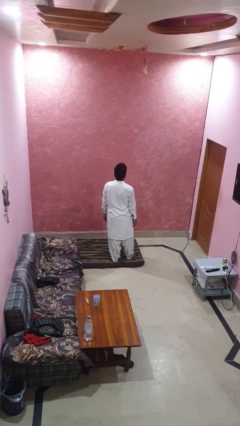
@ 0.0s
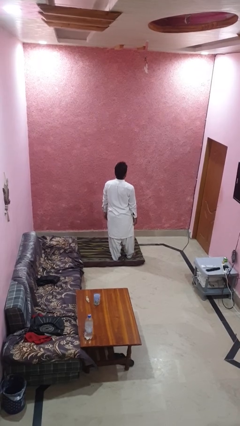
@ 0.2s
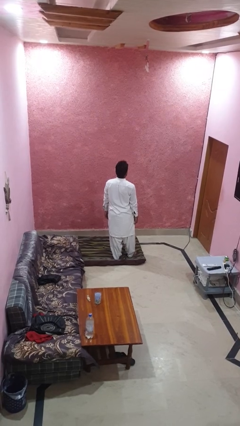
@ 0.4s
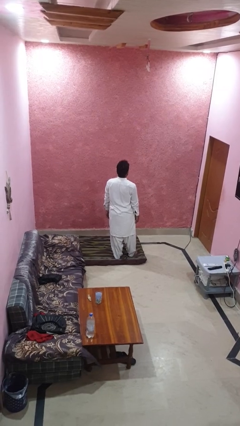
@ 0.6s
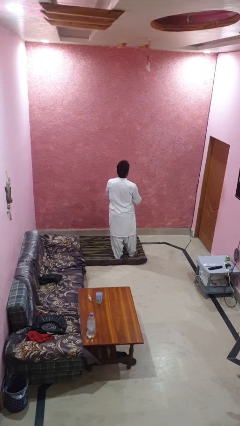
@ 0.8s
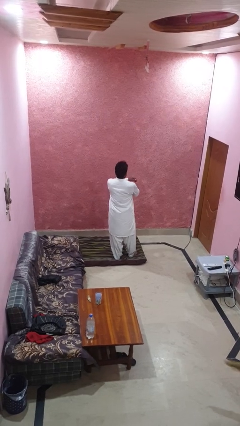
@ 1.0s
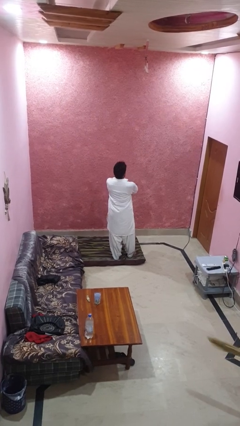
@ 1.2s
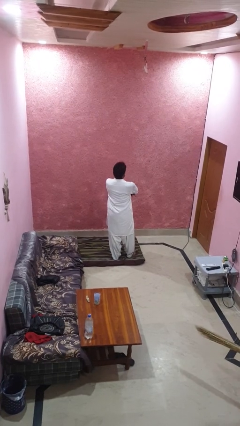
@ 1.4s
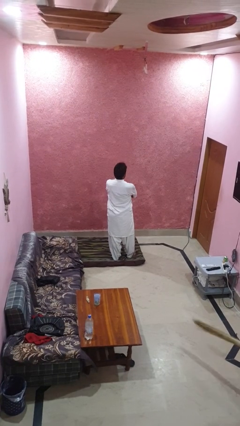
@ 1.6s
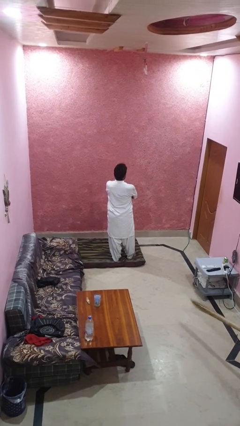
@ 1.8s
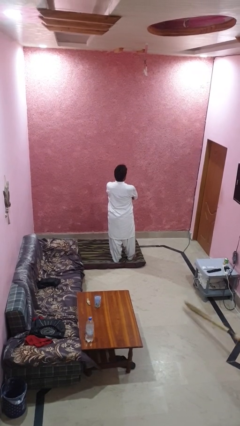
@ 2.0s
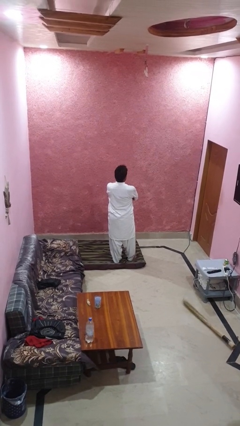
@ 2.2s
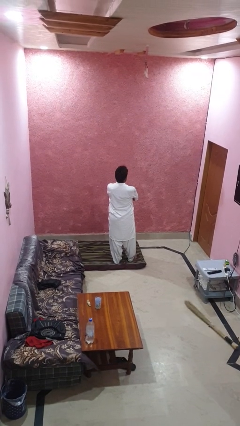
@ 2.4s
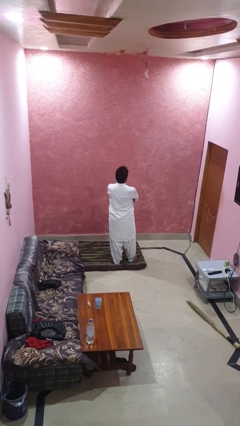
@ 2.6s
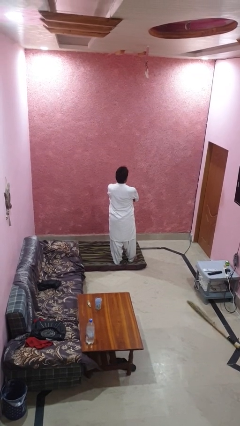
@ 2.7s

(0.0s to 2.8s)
person crosses arms

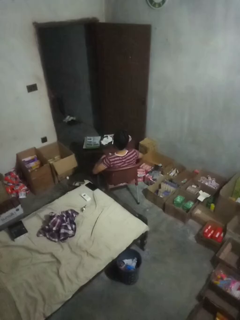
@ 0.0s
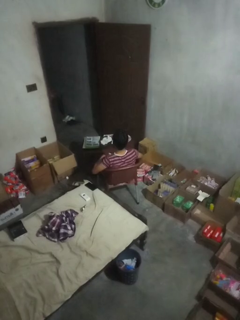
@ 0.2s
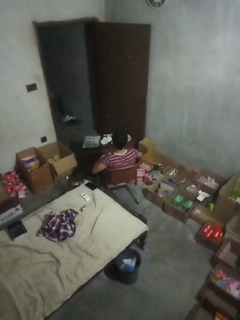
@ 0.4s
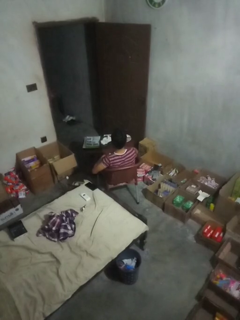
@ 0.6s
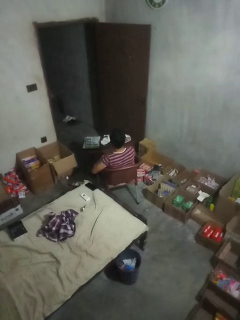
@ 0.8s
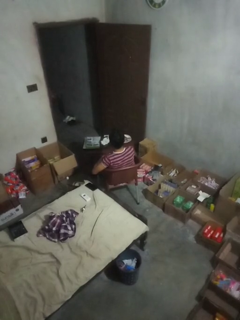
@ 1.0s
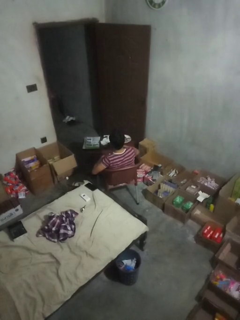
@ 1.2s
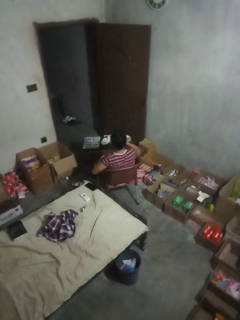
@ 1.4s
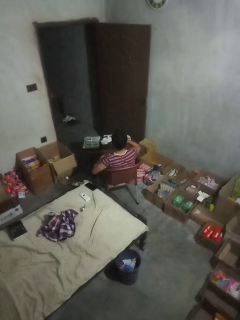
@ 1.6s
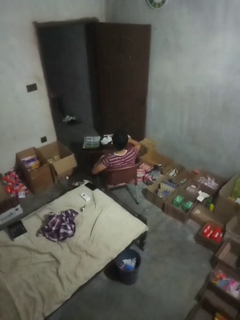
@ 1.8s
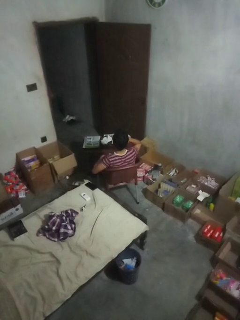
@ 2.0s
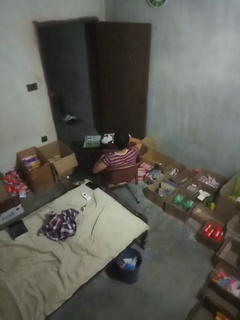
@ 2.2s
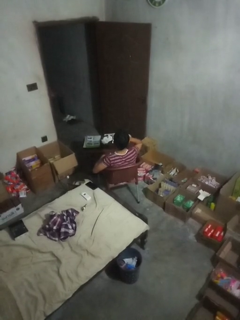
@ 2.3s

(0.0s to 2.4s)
person drinks from cup

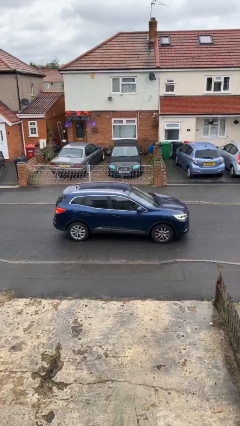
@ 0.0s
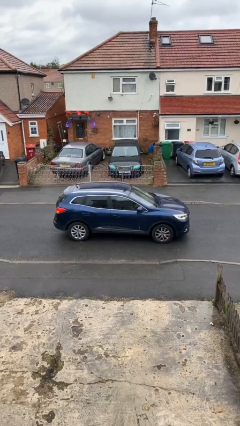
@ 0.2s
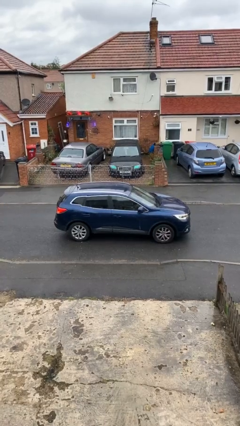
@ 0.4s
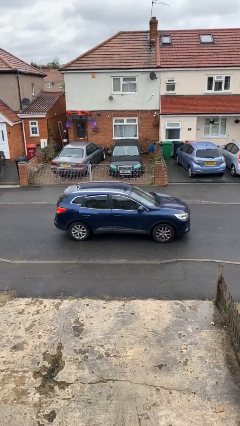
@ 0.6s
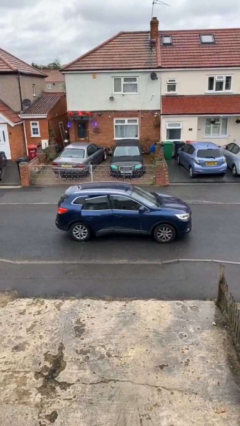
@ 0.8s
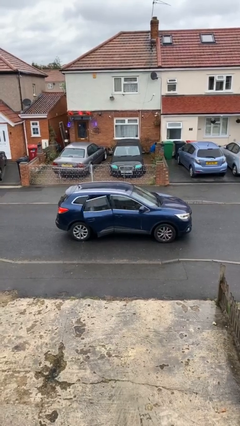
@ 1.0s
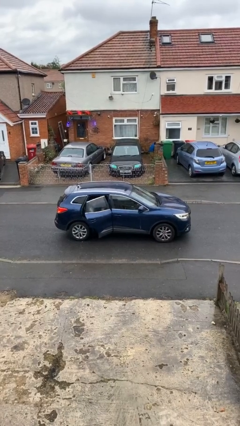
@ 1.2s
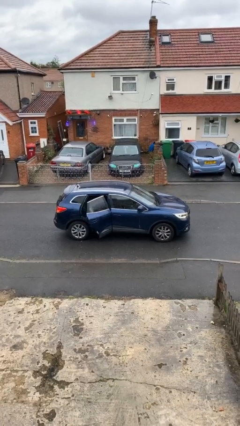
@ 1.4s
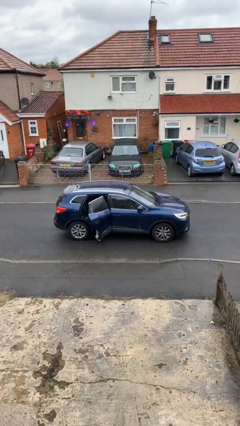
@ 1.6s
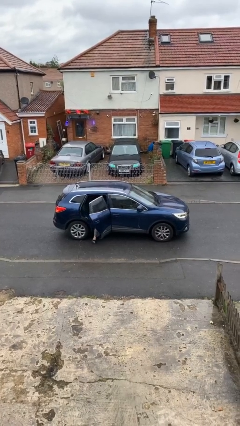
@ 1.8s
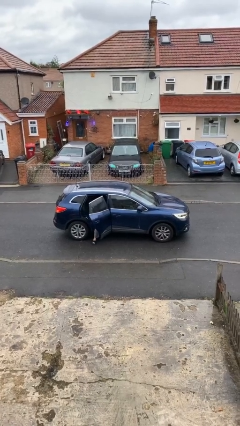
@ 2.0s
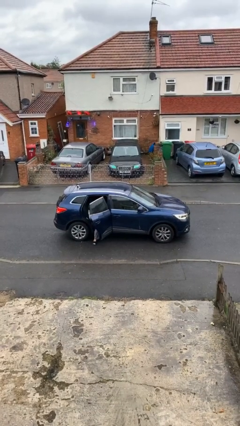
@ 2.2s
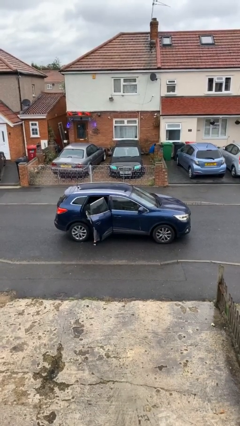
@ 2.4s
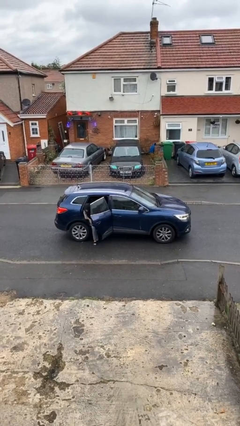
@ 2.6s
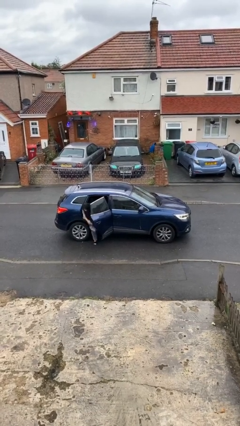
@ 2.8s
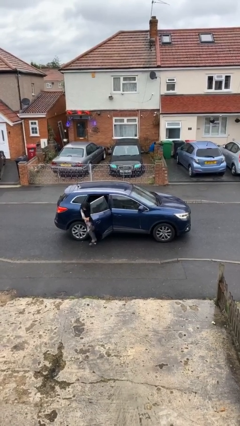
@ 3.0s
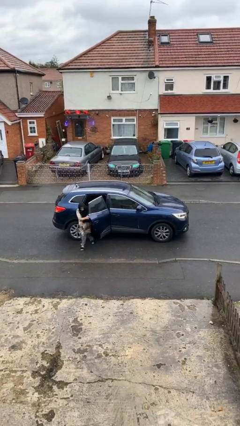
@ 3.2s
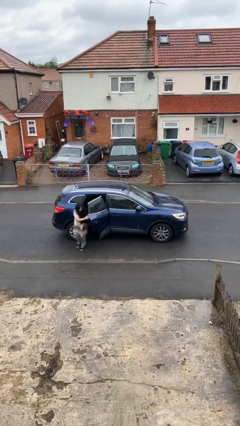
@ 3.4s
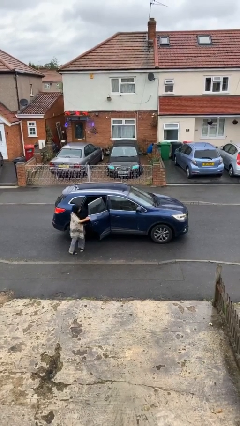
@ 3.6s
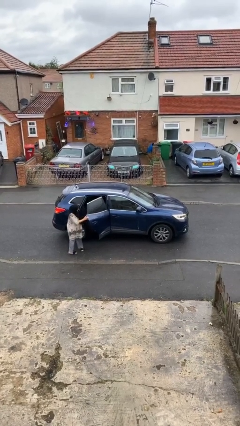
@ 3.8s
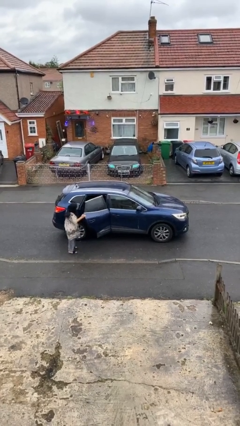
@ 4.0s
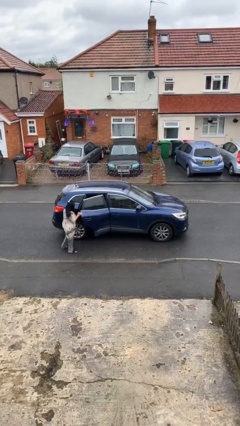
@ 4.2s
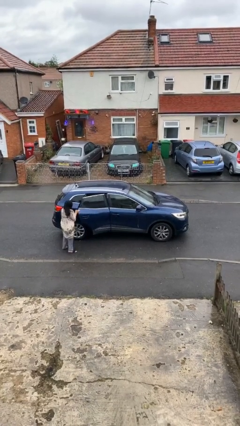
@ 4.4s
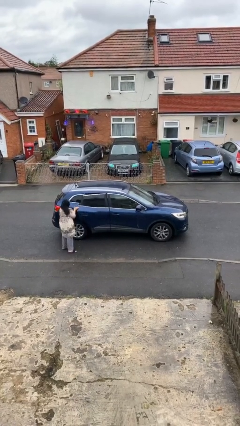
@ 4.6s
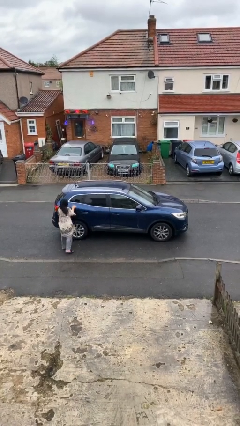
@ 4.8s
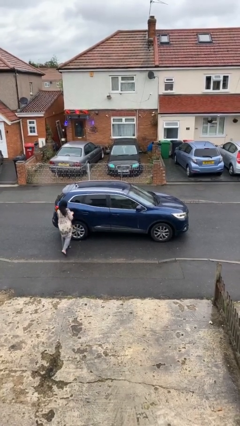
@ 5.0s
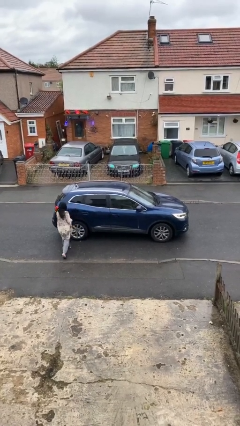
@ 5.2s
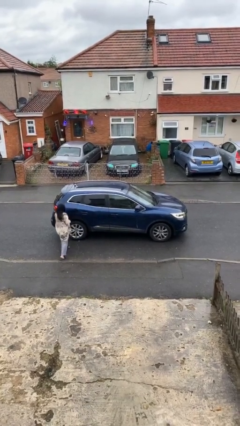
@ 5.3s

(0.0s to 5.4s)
car drops off person

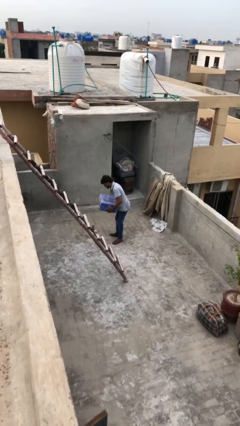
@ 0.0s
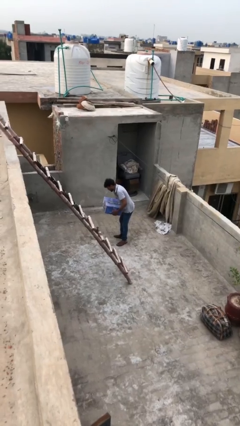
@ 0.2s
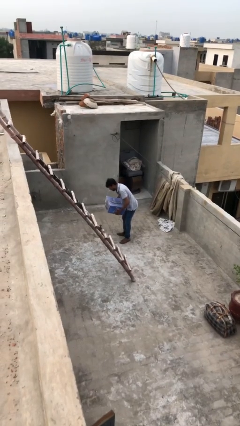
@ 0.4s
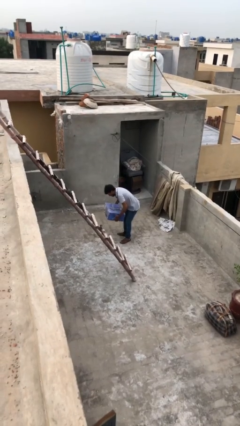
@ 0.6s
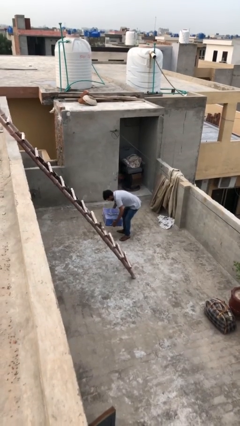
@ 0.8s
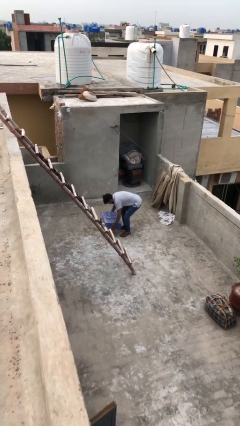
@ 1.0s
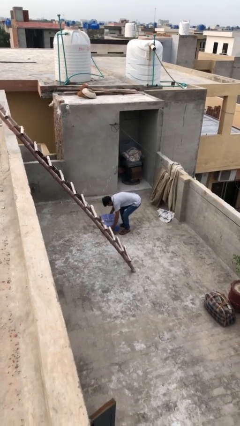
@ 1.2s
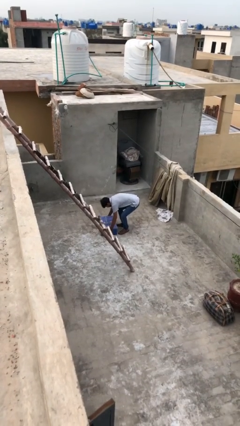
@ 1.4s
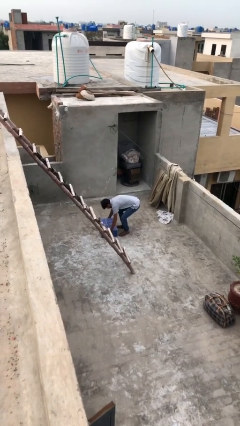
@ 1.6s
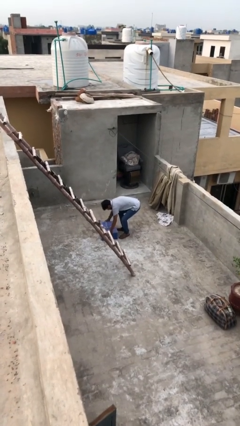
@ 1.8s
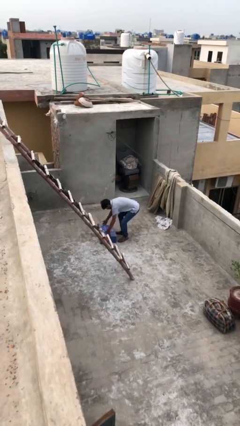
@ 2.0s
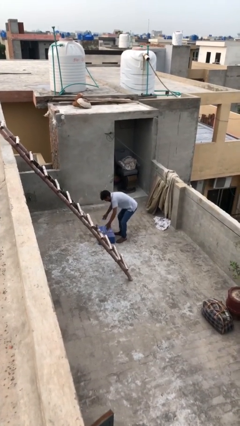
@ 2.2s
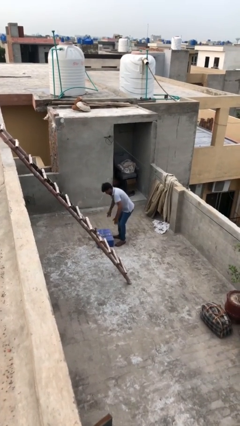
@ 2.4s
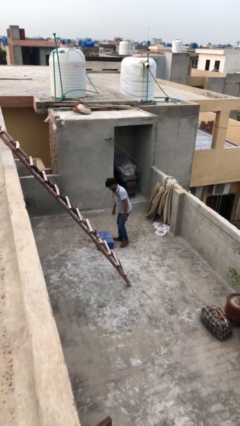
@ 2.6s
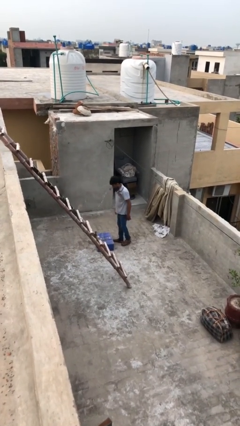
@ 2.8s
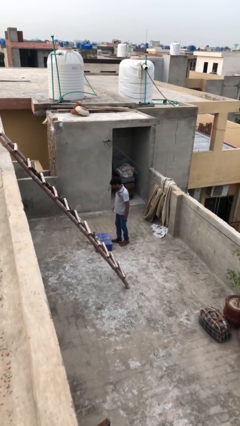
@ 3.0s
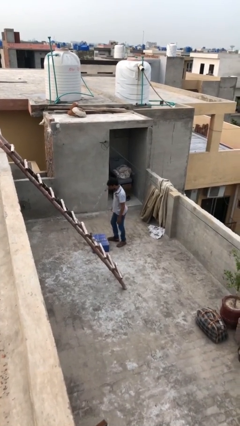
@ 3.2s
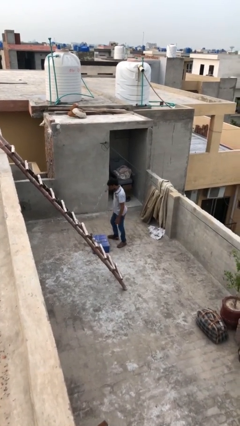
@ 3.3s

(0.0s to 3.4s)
person puts down object on floor

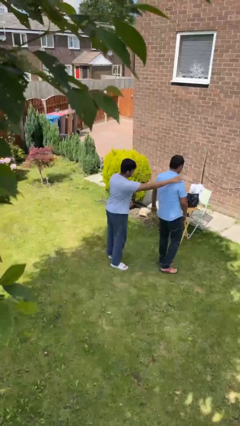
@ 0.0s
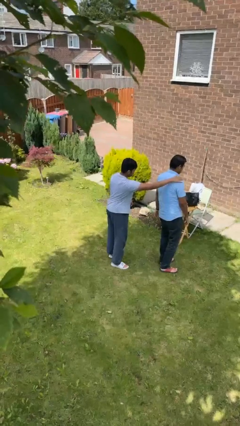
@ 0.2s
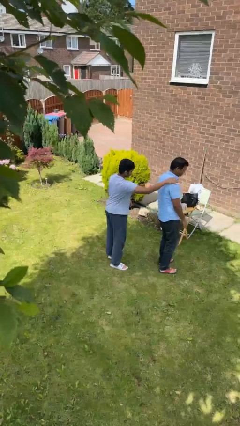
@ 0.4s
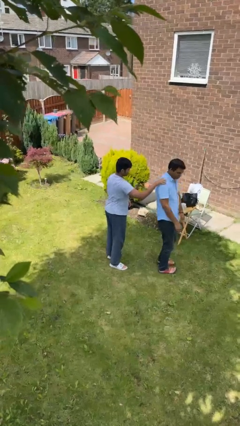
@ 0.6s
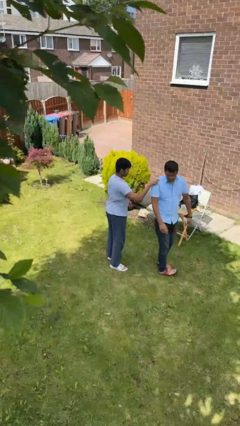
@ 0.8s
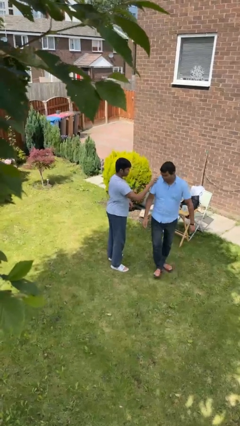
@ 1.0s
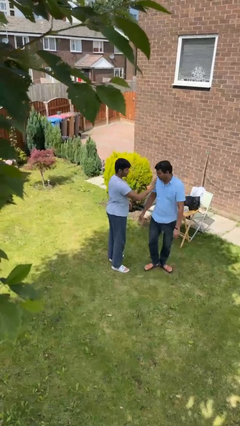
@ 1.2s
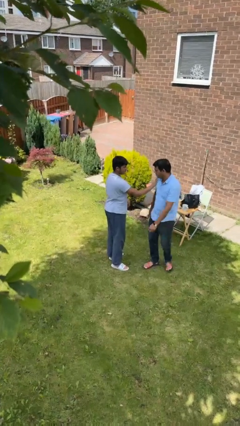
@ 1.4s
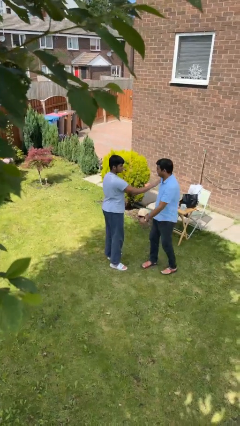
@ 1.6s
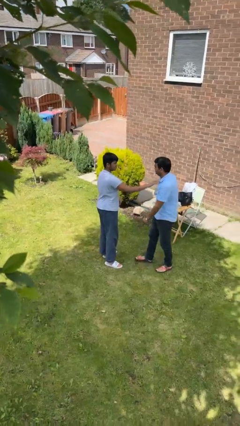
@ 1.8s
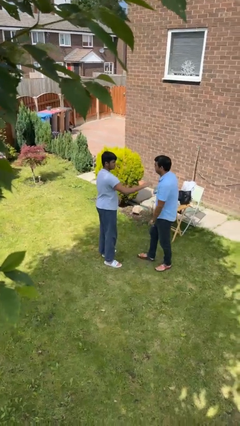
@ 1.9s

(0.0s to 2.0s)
person spins person around

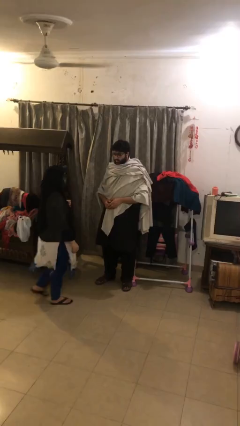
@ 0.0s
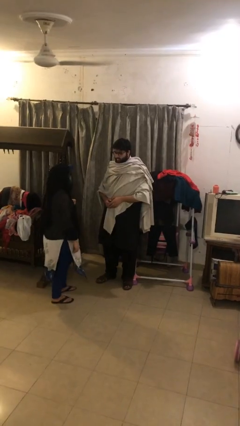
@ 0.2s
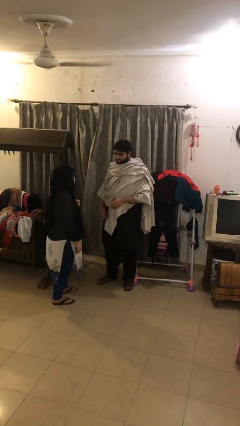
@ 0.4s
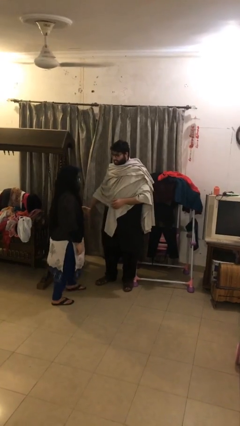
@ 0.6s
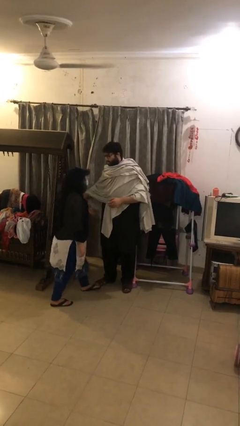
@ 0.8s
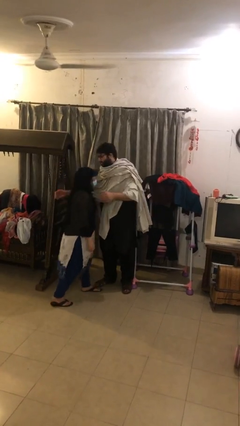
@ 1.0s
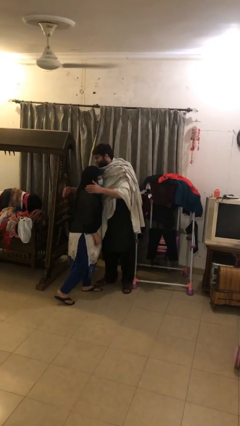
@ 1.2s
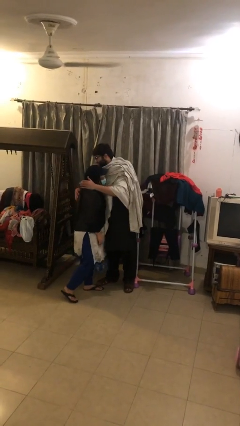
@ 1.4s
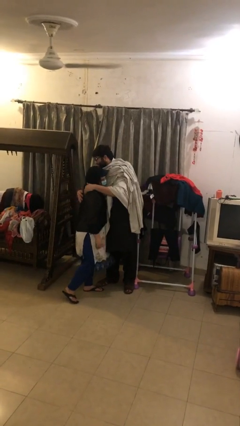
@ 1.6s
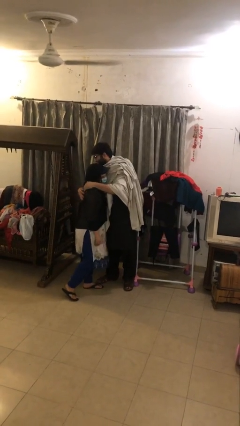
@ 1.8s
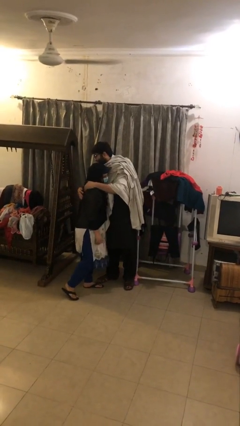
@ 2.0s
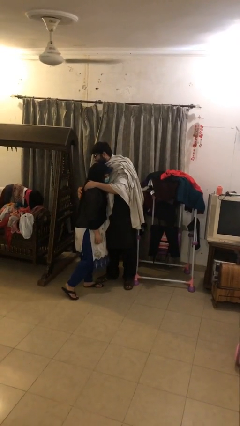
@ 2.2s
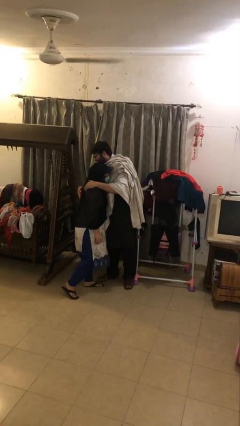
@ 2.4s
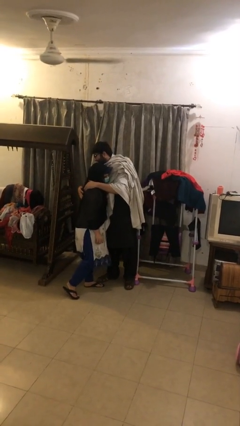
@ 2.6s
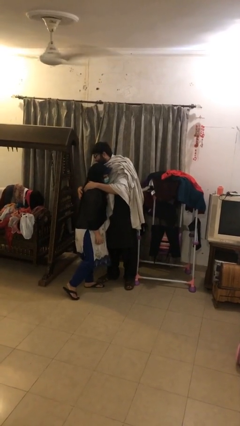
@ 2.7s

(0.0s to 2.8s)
person embraces person
